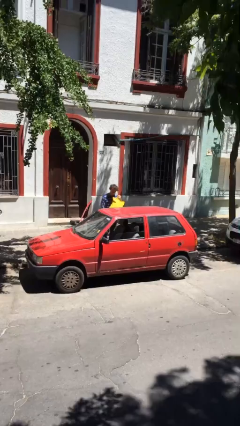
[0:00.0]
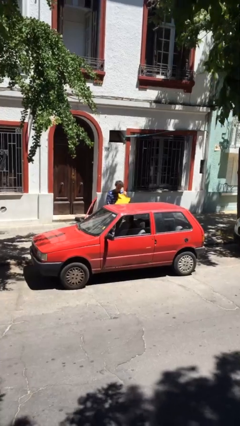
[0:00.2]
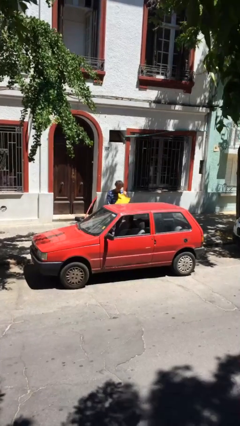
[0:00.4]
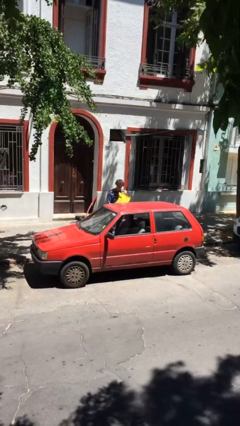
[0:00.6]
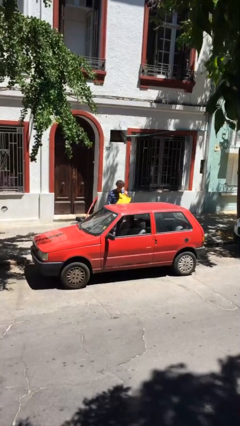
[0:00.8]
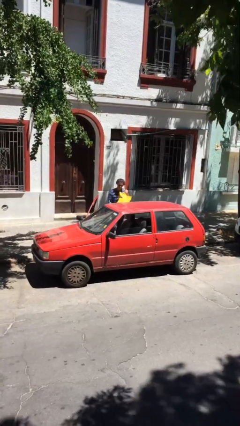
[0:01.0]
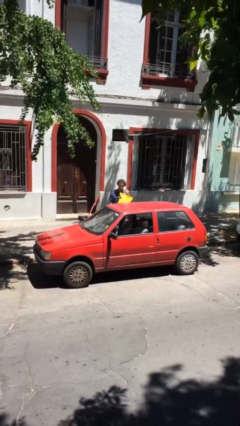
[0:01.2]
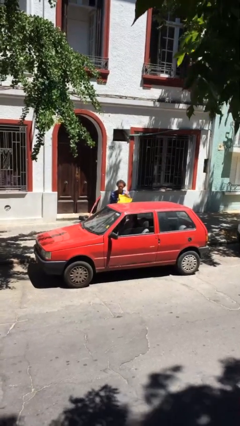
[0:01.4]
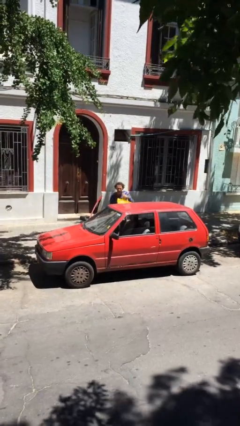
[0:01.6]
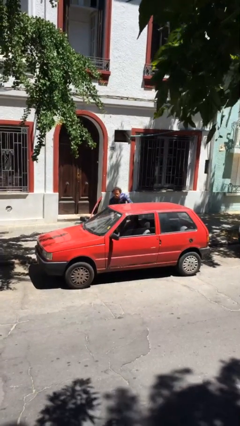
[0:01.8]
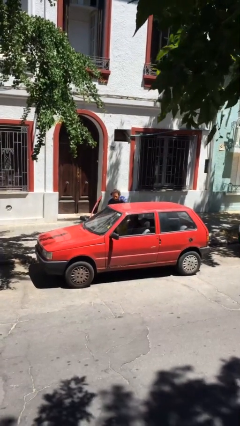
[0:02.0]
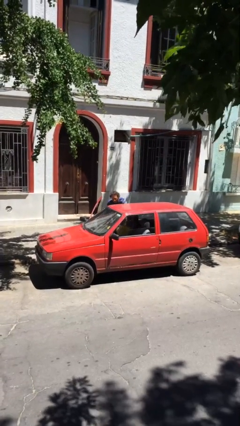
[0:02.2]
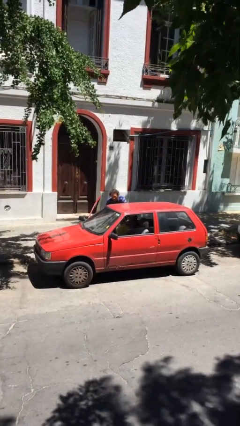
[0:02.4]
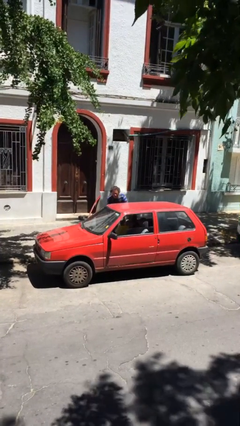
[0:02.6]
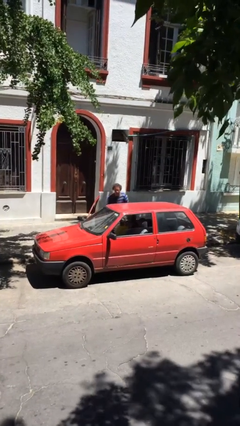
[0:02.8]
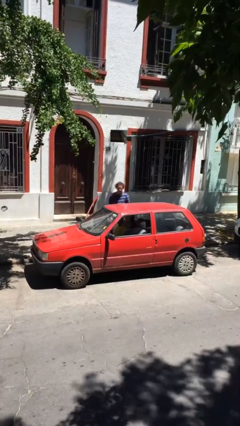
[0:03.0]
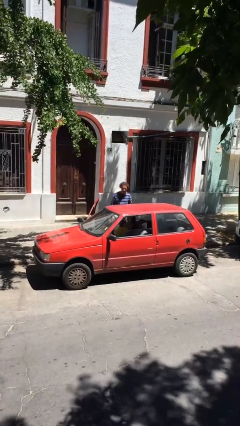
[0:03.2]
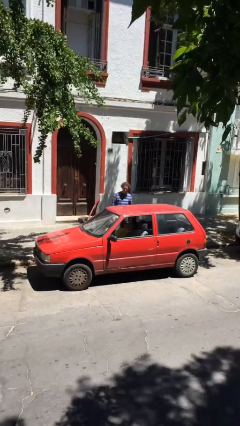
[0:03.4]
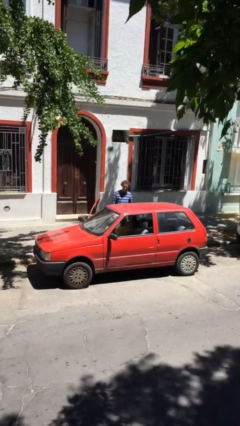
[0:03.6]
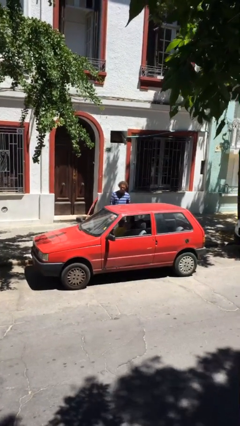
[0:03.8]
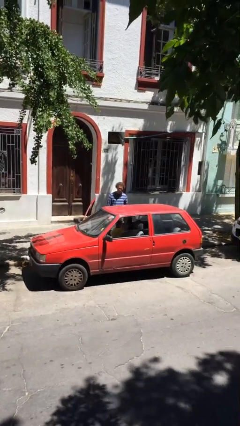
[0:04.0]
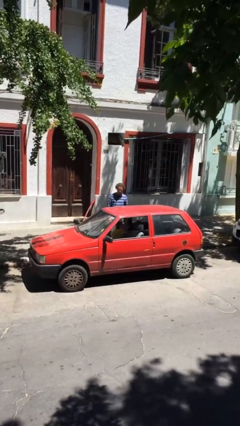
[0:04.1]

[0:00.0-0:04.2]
person loads car

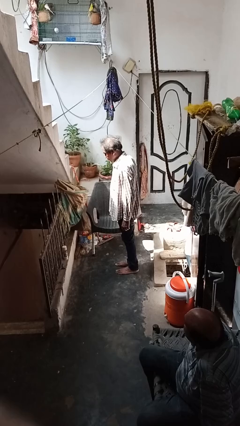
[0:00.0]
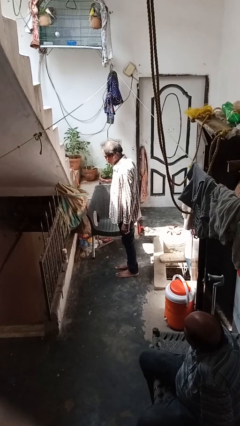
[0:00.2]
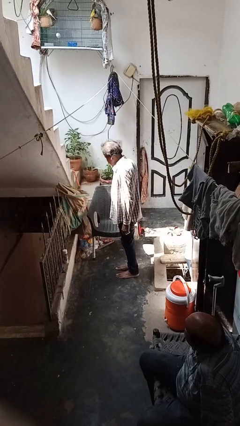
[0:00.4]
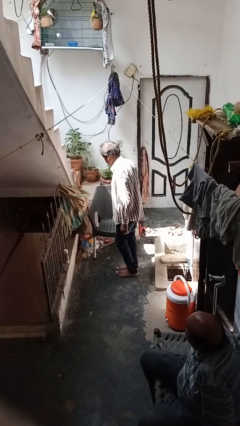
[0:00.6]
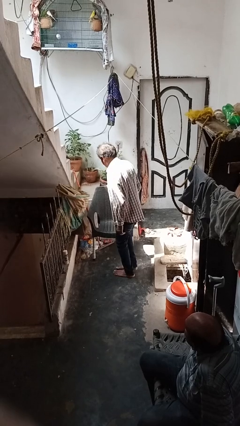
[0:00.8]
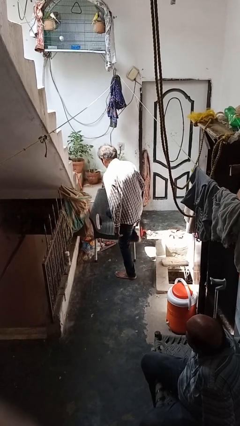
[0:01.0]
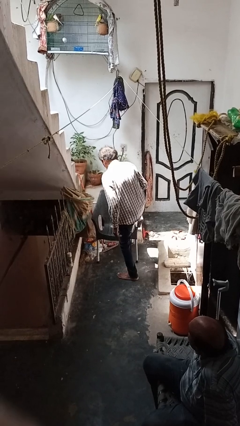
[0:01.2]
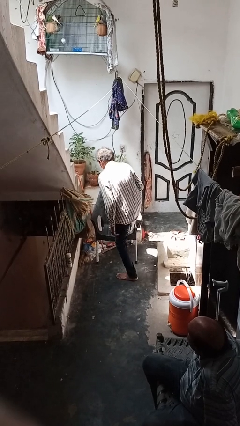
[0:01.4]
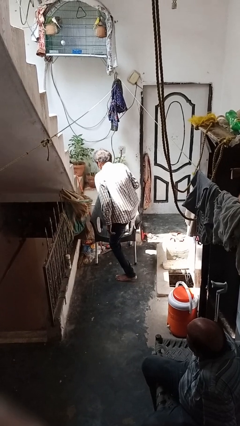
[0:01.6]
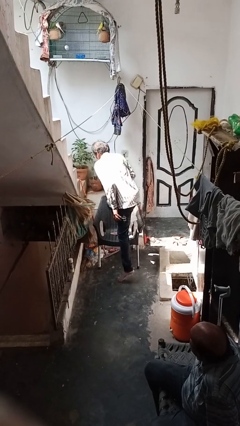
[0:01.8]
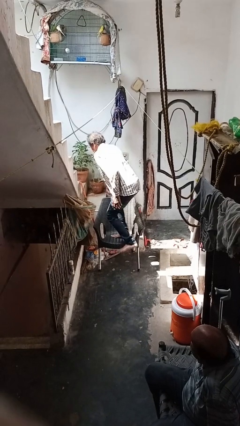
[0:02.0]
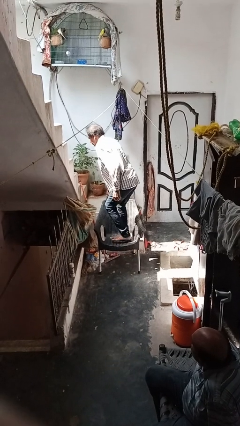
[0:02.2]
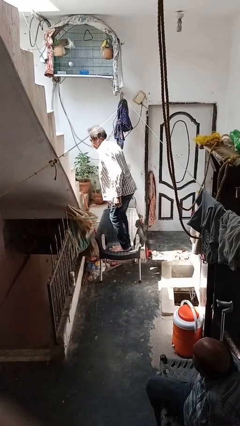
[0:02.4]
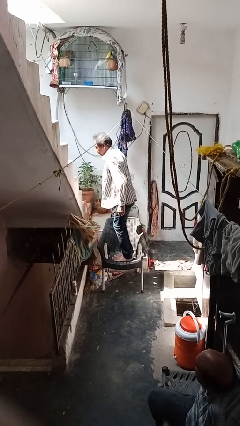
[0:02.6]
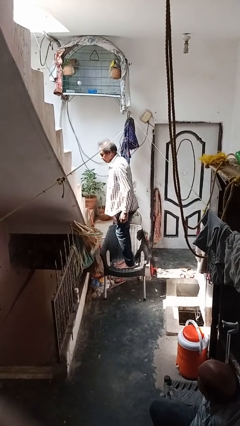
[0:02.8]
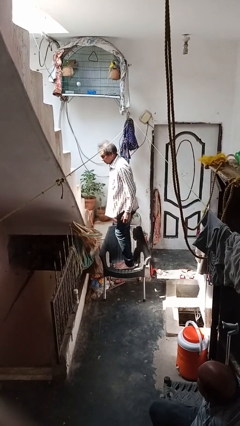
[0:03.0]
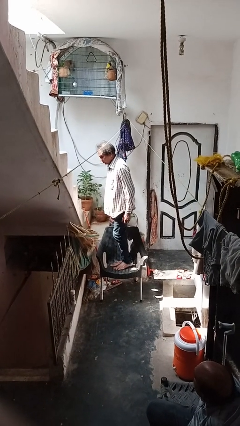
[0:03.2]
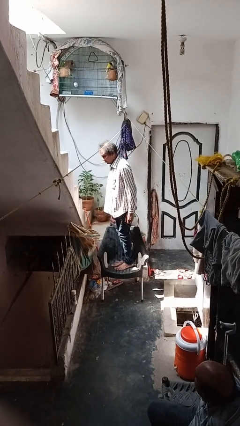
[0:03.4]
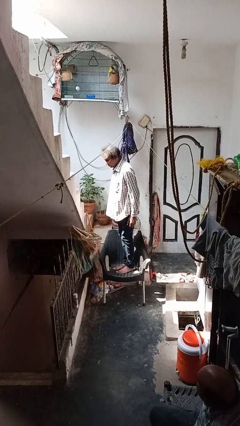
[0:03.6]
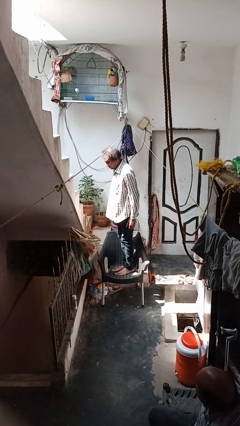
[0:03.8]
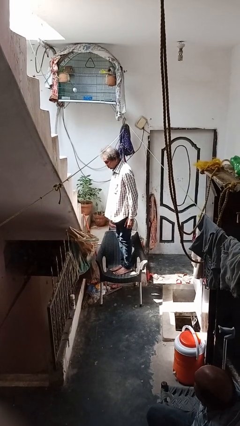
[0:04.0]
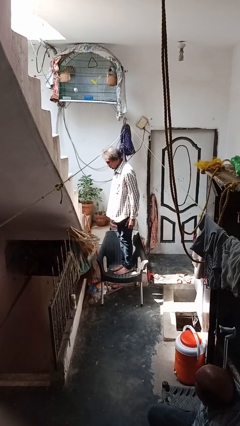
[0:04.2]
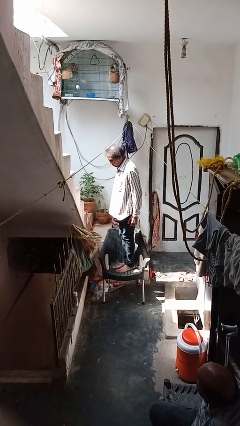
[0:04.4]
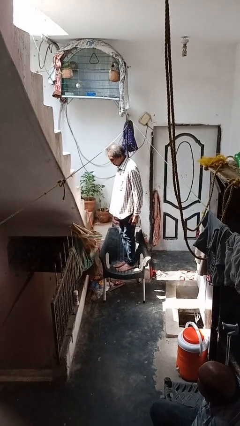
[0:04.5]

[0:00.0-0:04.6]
person climbs on chair

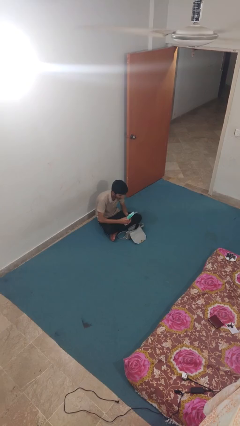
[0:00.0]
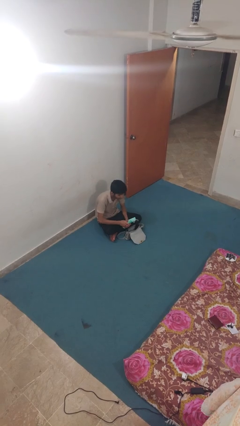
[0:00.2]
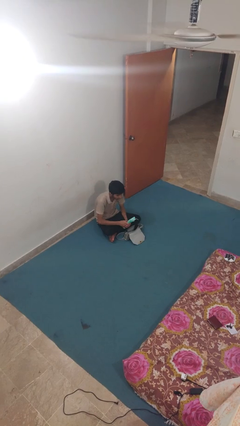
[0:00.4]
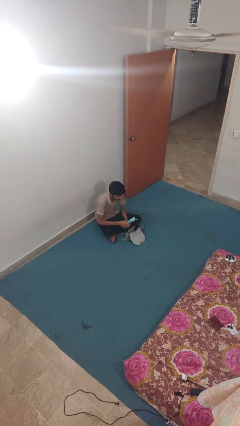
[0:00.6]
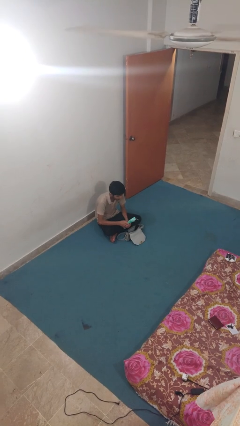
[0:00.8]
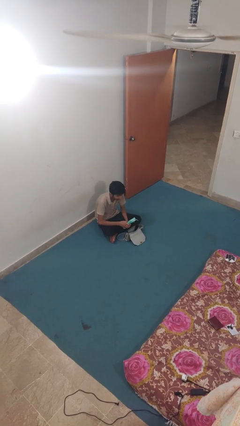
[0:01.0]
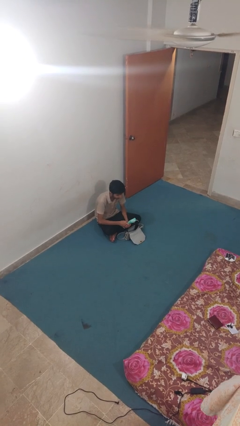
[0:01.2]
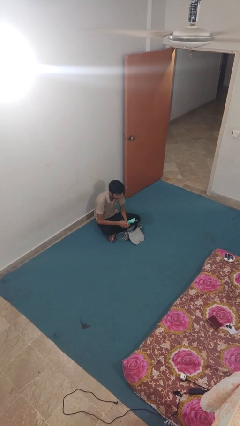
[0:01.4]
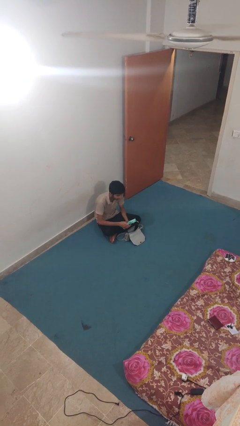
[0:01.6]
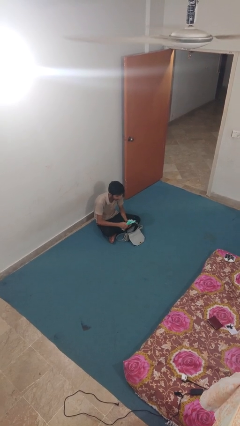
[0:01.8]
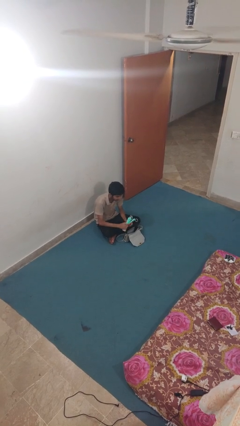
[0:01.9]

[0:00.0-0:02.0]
person takes object from purse

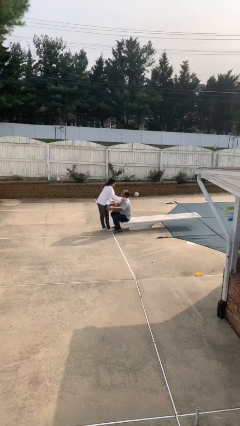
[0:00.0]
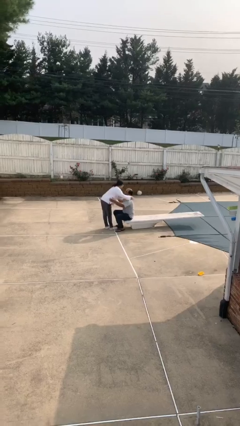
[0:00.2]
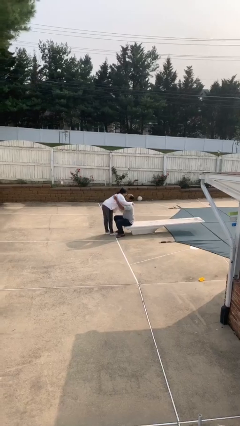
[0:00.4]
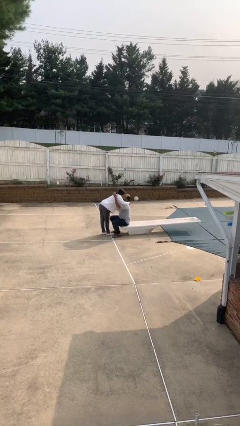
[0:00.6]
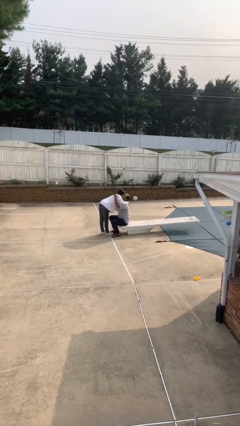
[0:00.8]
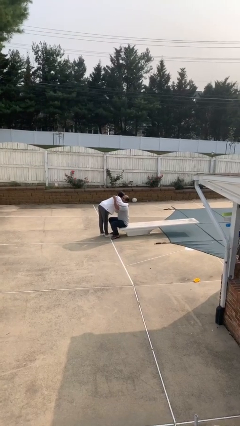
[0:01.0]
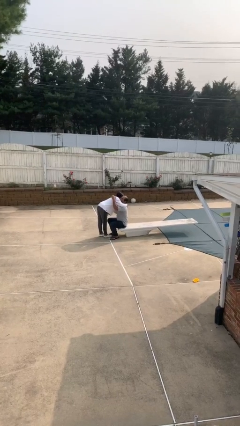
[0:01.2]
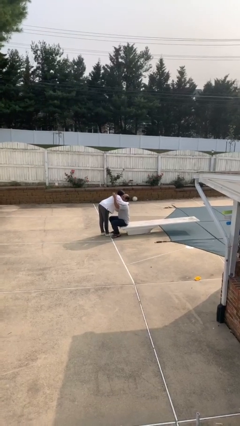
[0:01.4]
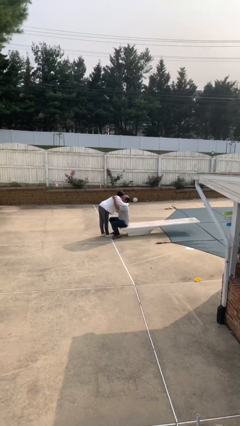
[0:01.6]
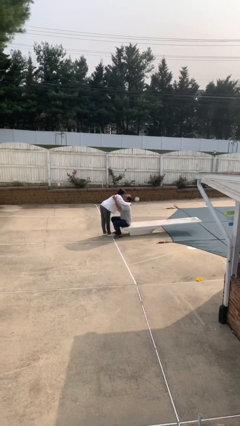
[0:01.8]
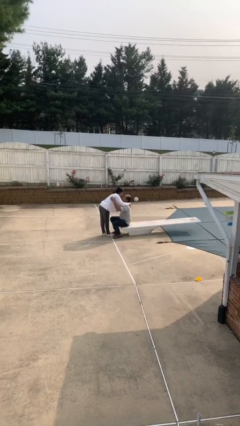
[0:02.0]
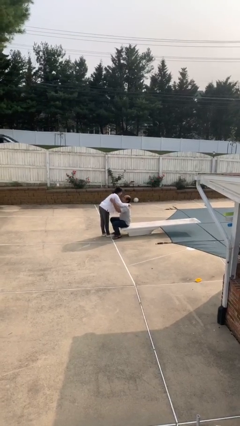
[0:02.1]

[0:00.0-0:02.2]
person embraces person

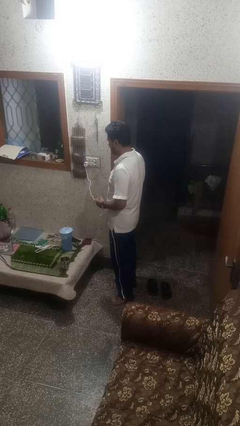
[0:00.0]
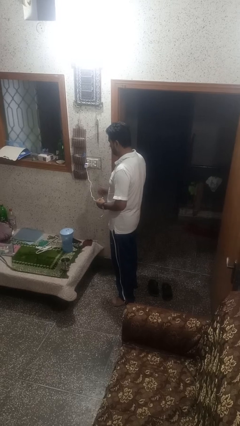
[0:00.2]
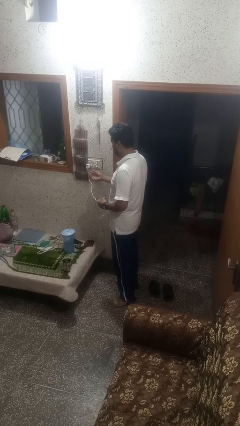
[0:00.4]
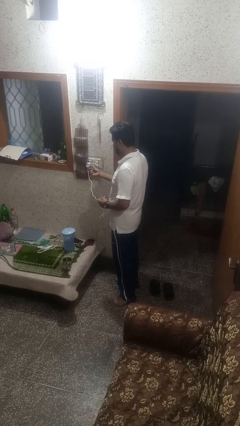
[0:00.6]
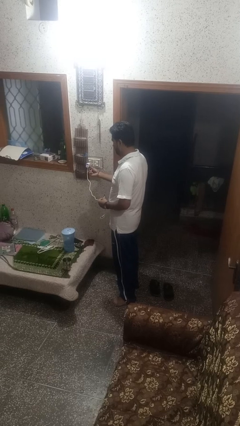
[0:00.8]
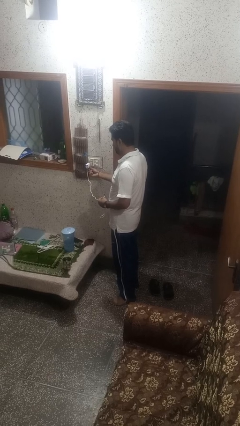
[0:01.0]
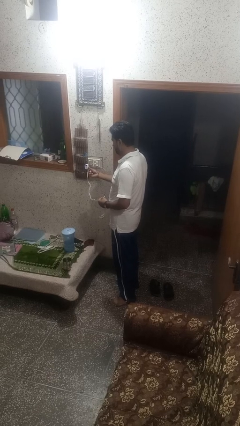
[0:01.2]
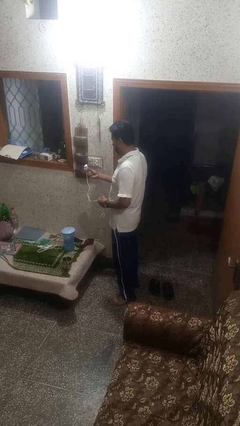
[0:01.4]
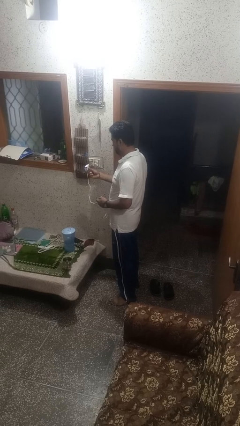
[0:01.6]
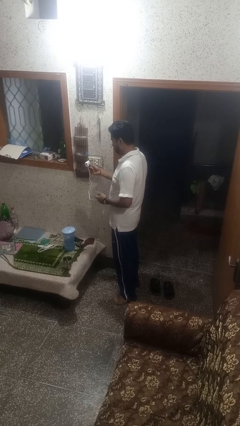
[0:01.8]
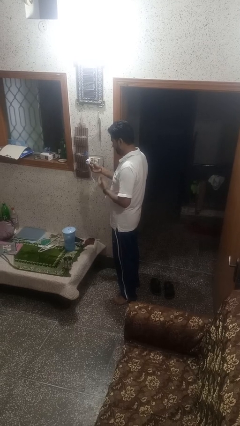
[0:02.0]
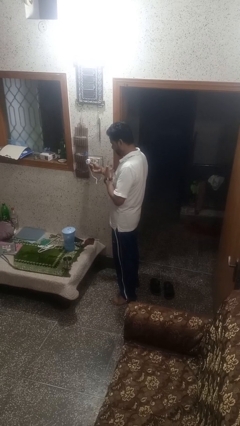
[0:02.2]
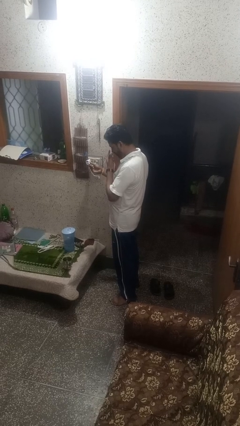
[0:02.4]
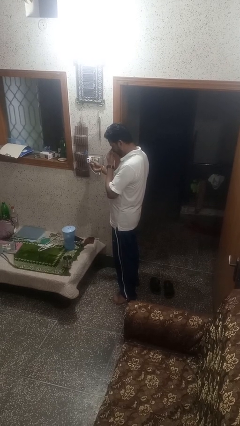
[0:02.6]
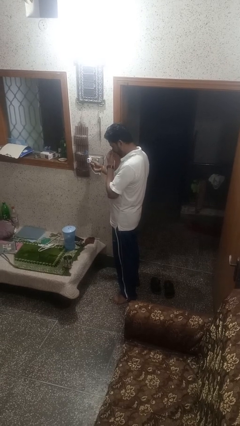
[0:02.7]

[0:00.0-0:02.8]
person unplugs from electrical socket

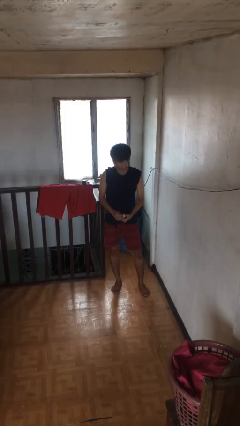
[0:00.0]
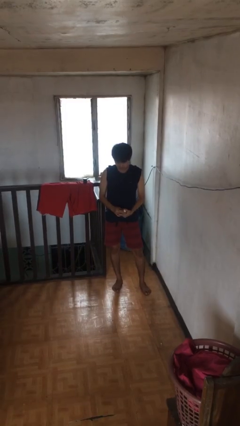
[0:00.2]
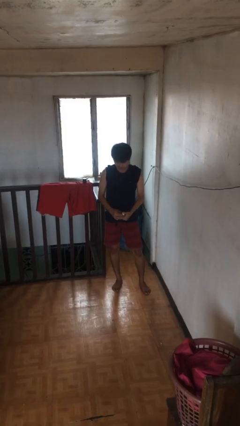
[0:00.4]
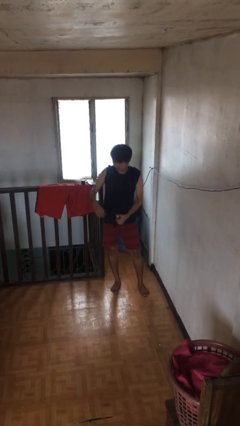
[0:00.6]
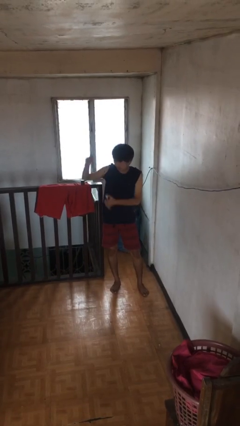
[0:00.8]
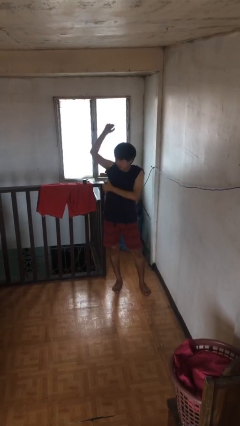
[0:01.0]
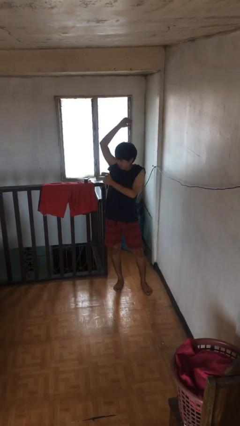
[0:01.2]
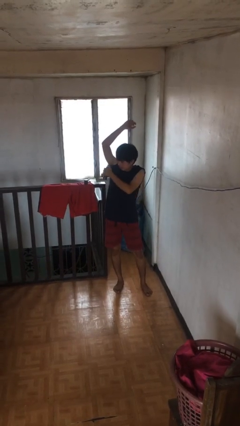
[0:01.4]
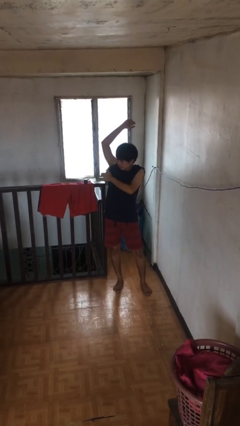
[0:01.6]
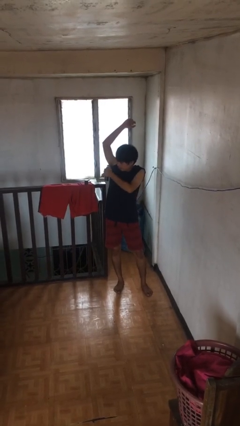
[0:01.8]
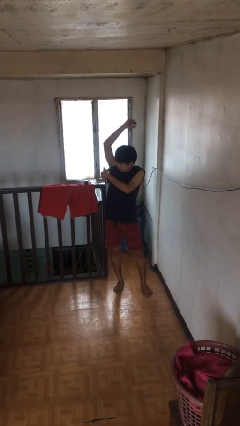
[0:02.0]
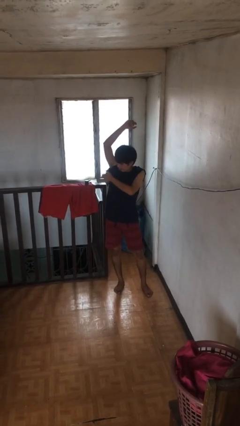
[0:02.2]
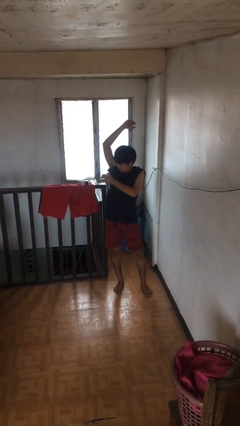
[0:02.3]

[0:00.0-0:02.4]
person applies deodorant
